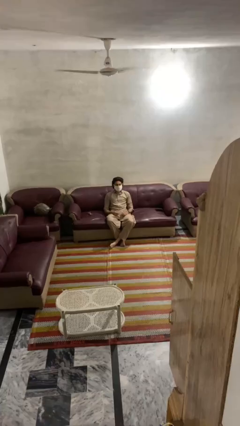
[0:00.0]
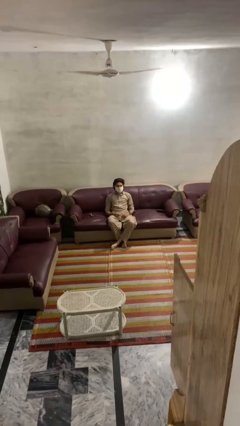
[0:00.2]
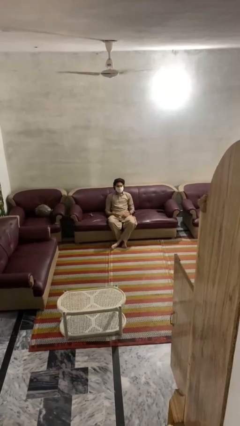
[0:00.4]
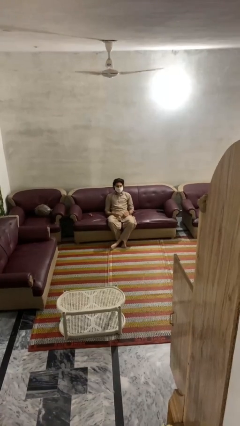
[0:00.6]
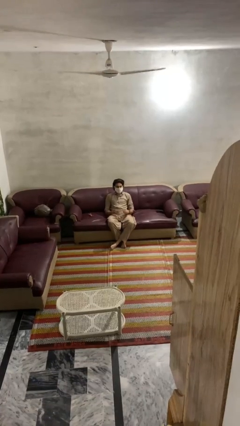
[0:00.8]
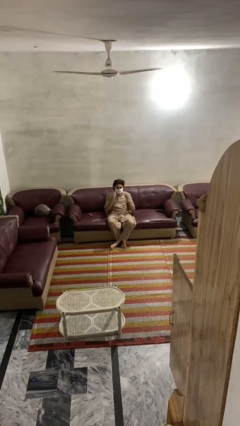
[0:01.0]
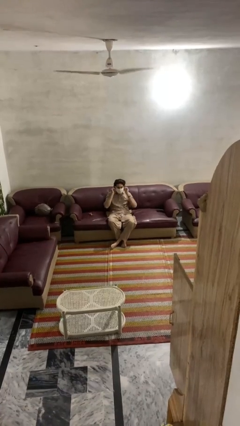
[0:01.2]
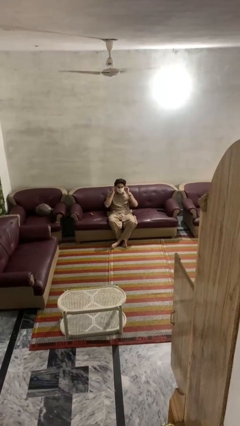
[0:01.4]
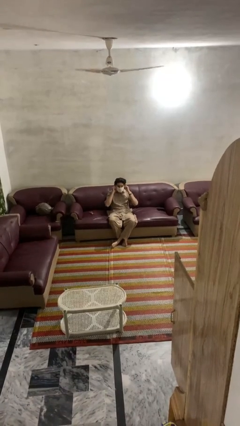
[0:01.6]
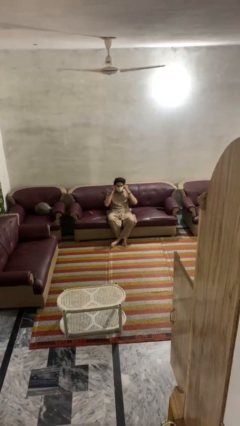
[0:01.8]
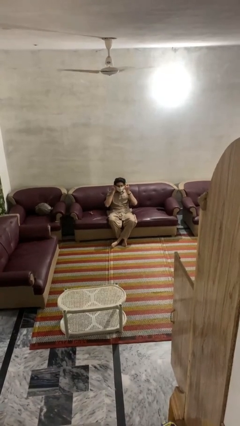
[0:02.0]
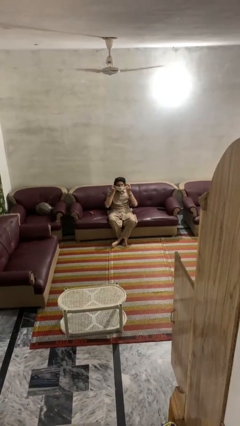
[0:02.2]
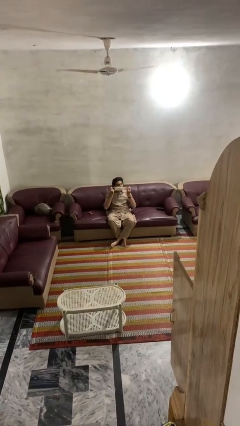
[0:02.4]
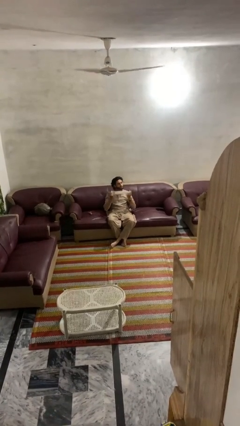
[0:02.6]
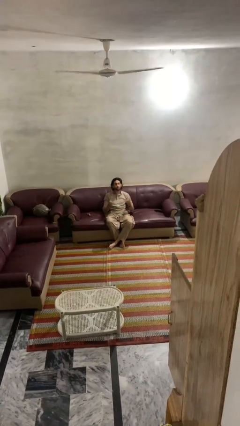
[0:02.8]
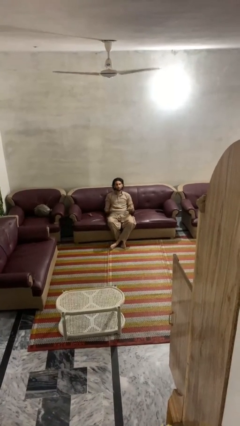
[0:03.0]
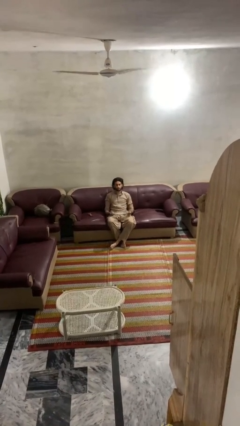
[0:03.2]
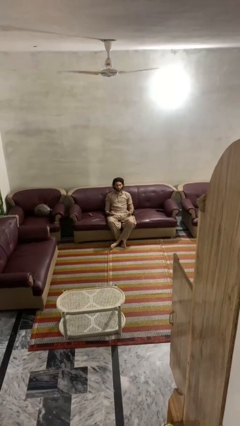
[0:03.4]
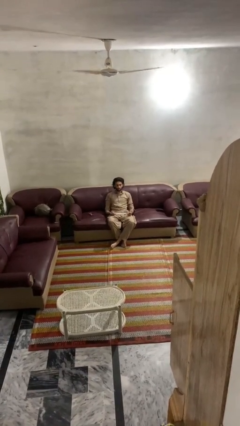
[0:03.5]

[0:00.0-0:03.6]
person takes off facemask

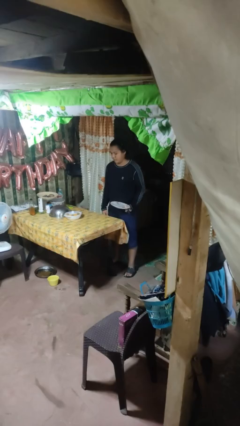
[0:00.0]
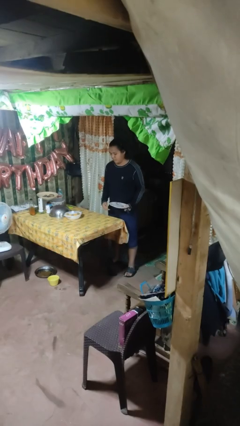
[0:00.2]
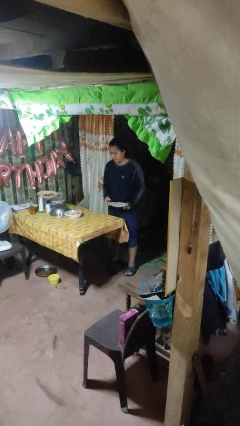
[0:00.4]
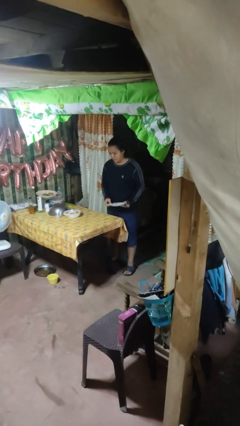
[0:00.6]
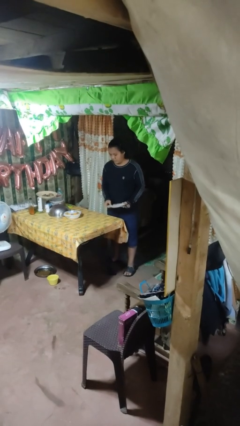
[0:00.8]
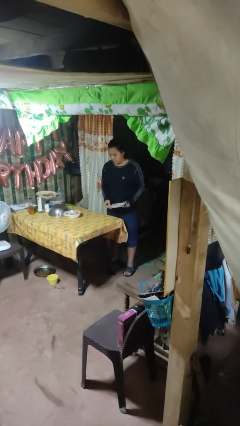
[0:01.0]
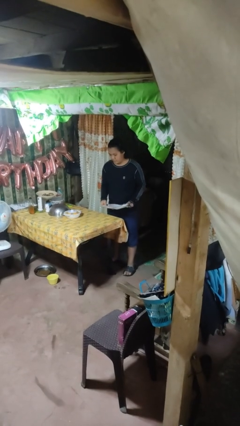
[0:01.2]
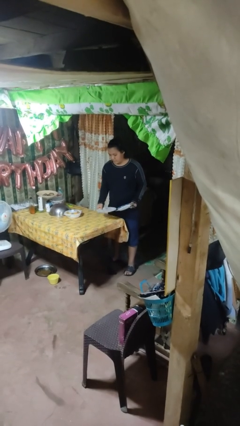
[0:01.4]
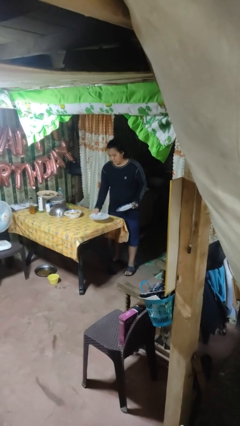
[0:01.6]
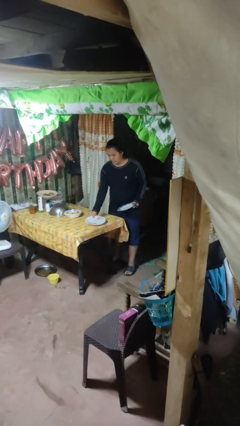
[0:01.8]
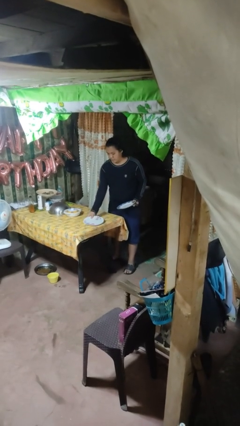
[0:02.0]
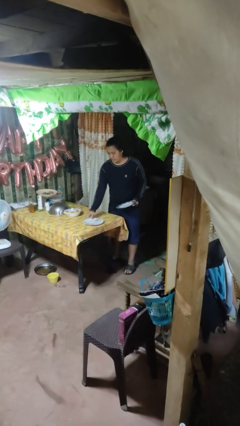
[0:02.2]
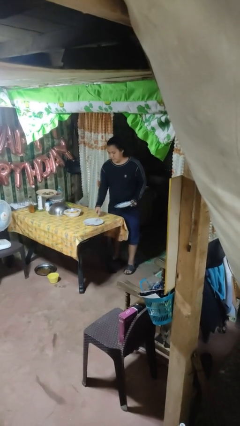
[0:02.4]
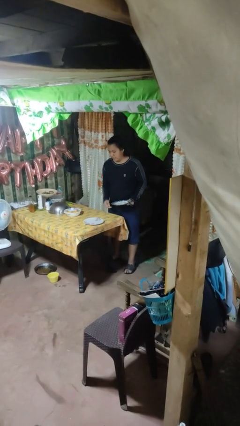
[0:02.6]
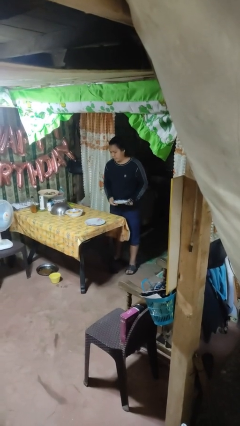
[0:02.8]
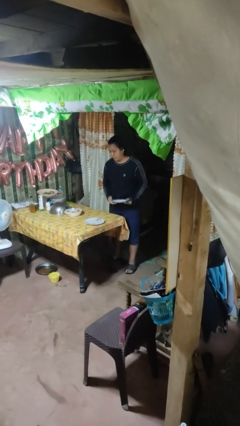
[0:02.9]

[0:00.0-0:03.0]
person sets table

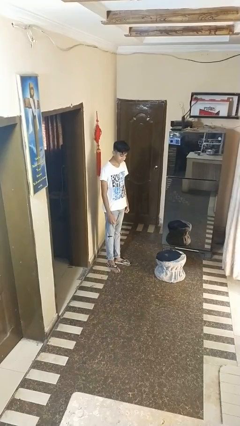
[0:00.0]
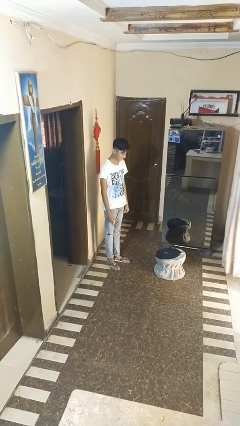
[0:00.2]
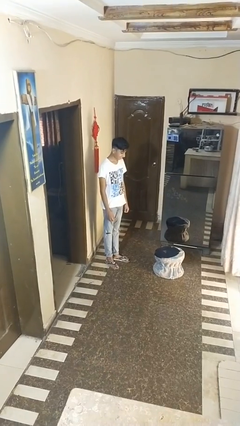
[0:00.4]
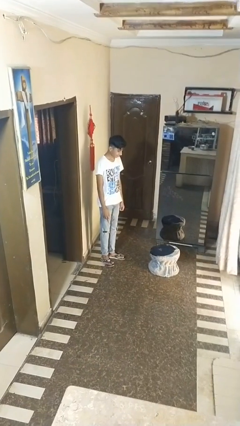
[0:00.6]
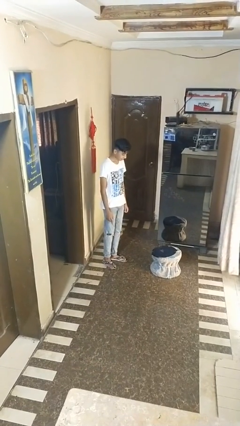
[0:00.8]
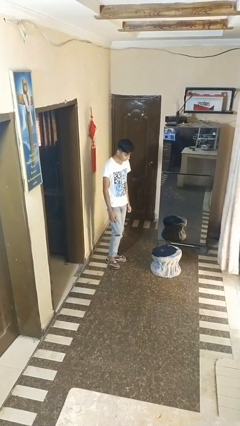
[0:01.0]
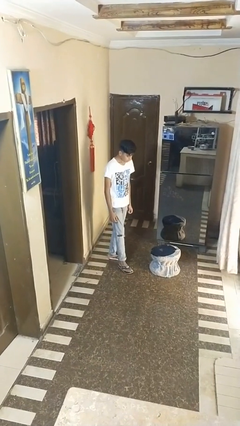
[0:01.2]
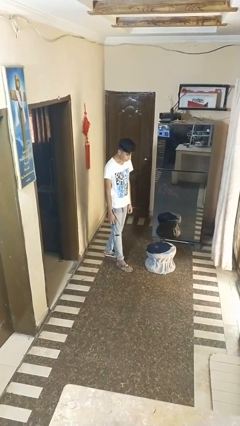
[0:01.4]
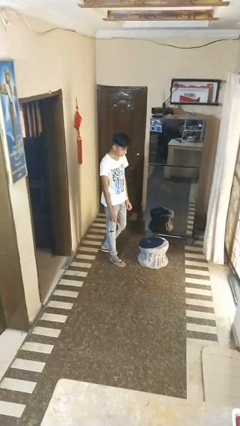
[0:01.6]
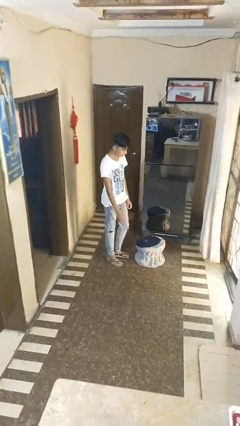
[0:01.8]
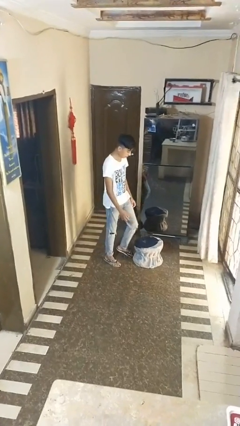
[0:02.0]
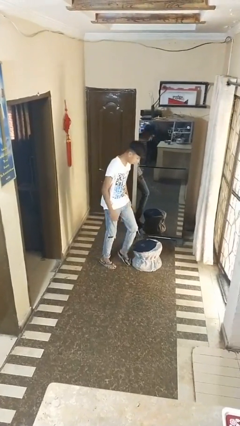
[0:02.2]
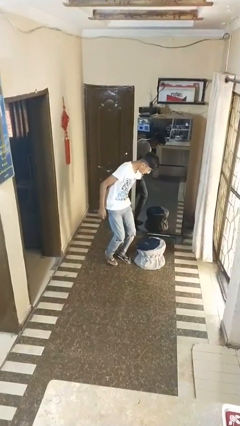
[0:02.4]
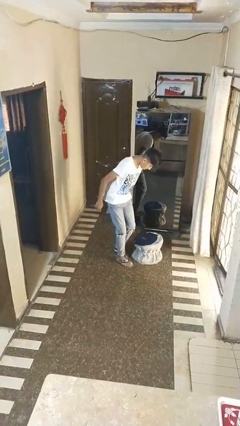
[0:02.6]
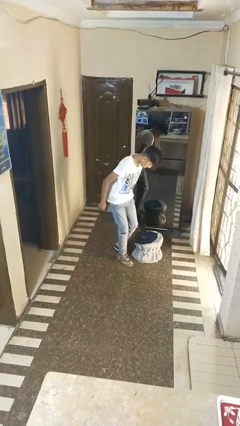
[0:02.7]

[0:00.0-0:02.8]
person trips on object on floor

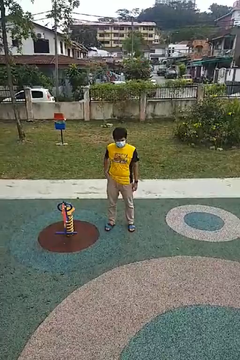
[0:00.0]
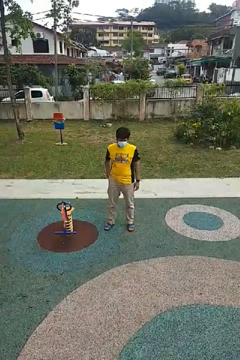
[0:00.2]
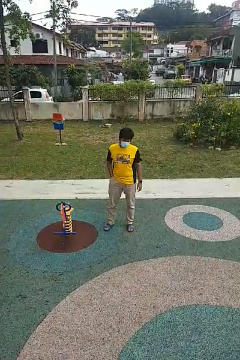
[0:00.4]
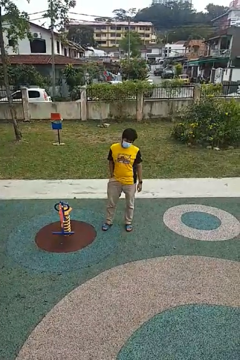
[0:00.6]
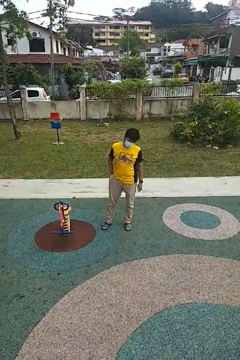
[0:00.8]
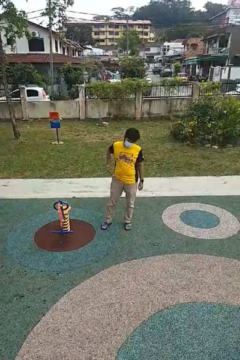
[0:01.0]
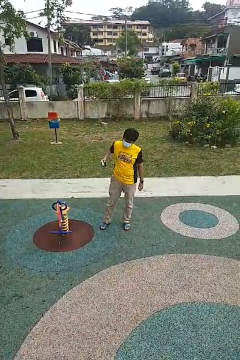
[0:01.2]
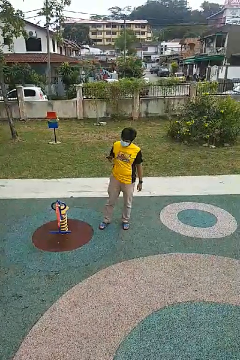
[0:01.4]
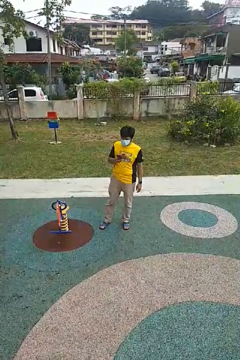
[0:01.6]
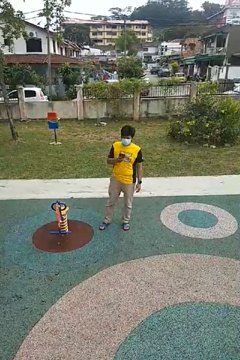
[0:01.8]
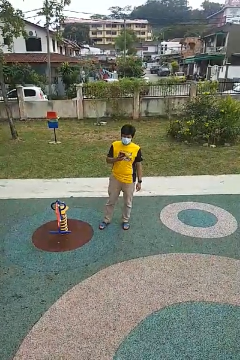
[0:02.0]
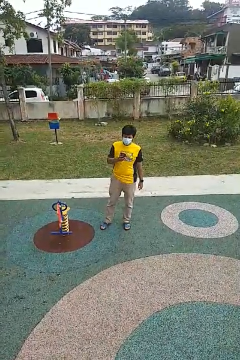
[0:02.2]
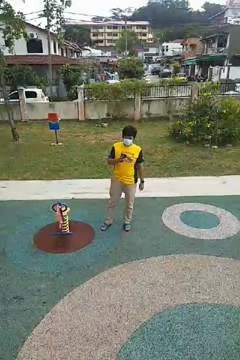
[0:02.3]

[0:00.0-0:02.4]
person takes phone from pocket

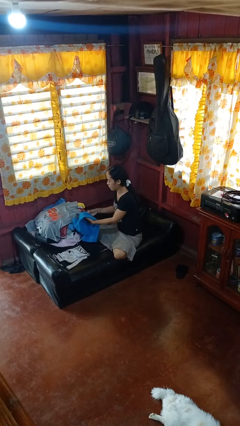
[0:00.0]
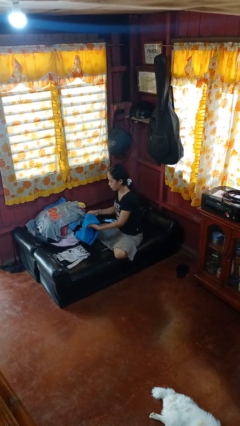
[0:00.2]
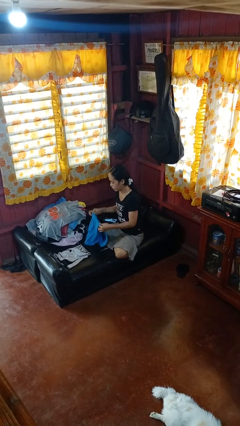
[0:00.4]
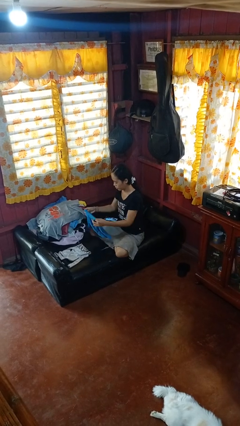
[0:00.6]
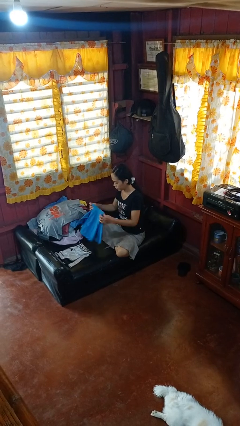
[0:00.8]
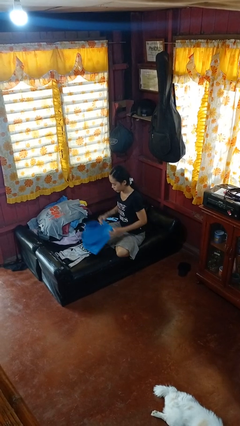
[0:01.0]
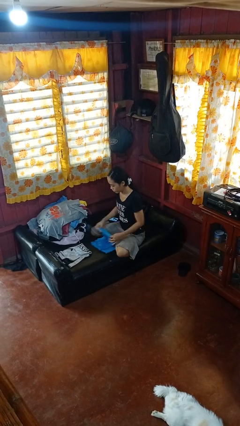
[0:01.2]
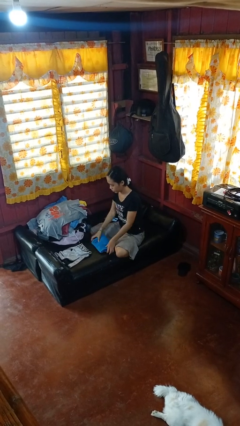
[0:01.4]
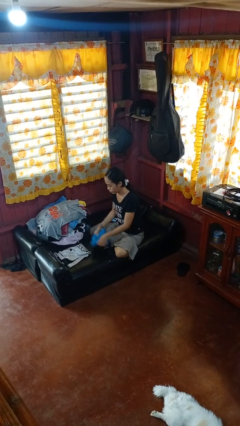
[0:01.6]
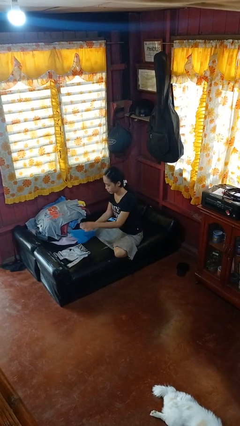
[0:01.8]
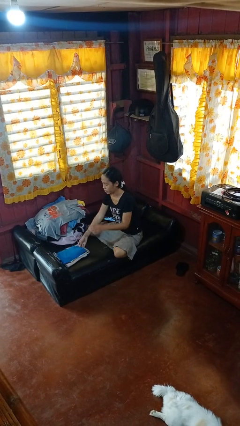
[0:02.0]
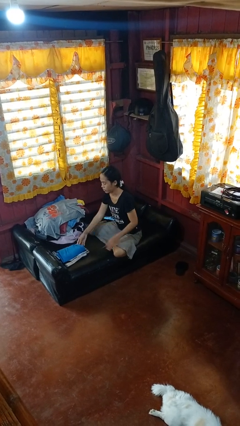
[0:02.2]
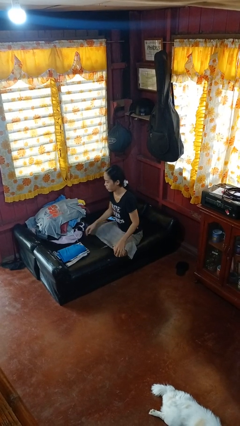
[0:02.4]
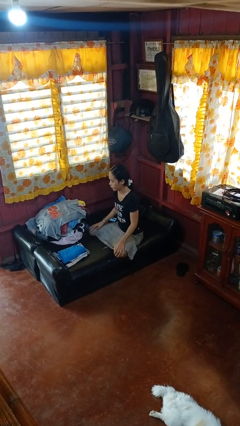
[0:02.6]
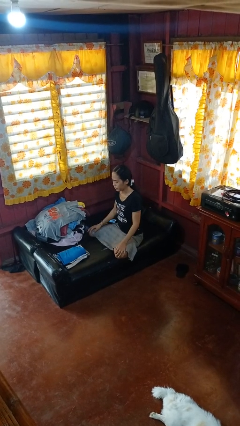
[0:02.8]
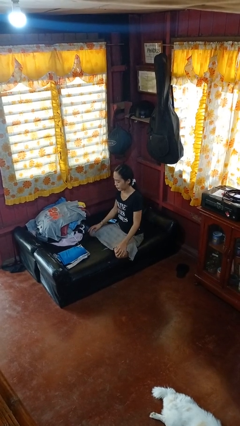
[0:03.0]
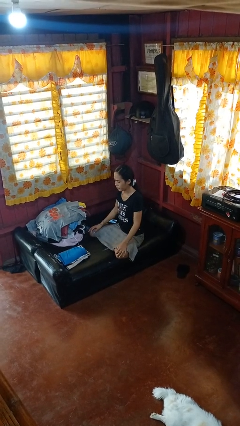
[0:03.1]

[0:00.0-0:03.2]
person folds shirt

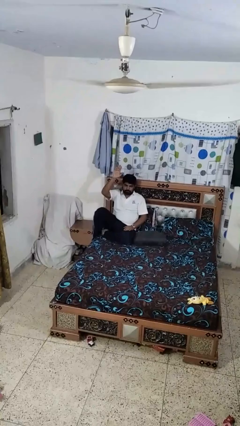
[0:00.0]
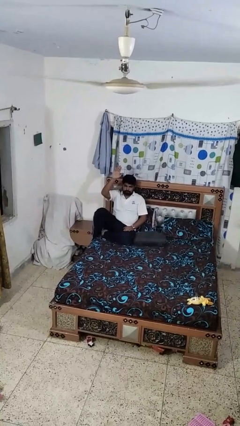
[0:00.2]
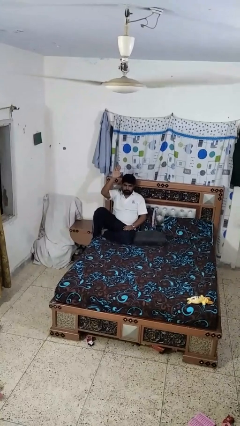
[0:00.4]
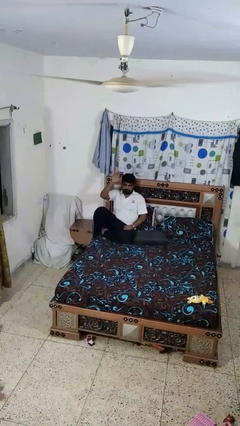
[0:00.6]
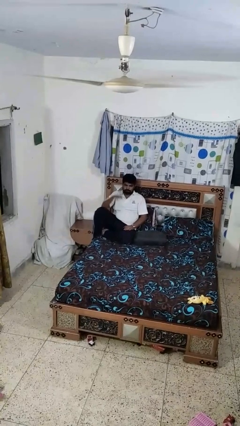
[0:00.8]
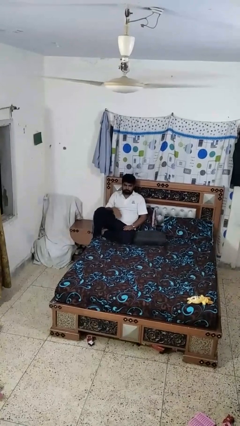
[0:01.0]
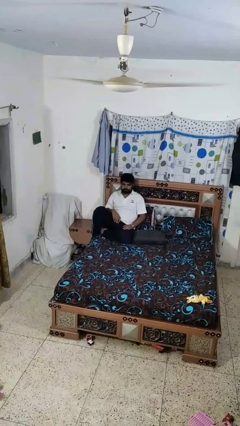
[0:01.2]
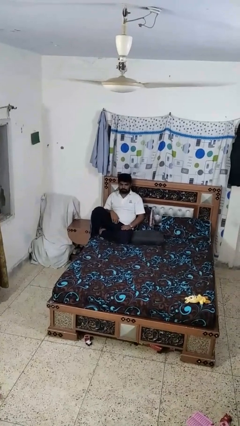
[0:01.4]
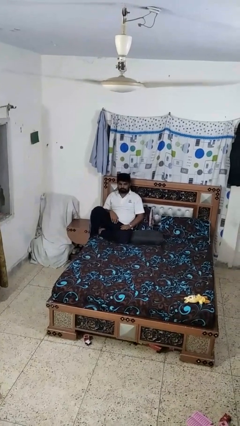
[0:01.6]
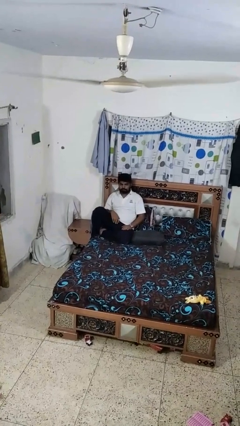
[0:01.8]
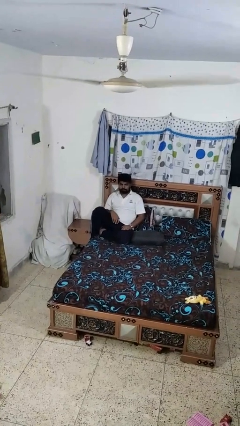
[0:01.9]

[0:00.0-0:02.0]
person gestures lower hand

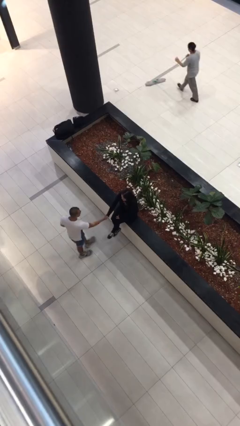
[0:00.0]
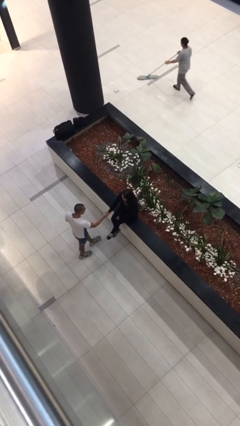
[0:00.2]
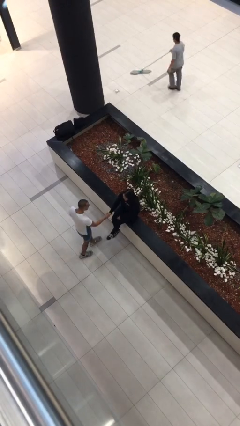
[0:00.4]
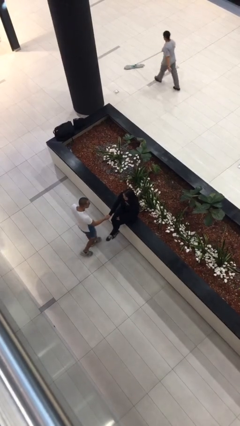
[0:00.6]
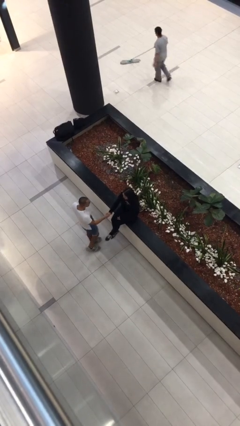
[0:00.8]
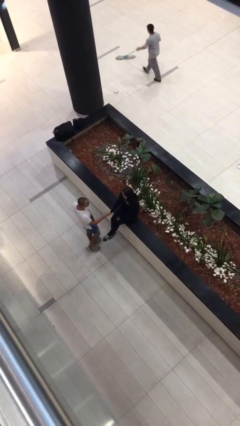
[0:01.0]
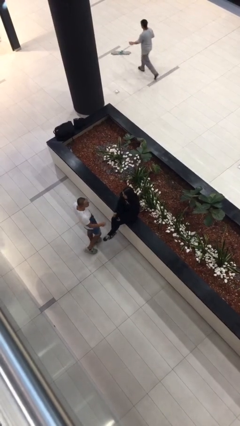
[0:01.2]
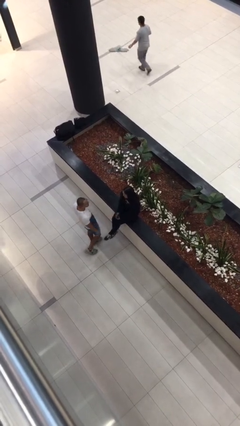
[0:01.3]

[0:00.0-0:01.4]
person shakes hand
